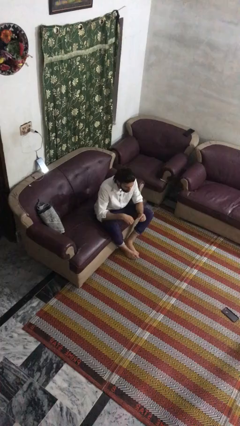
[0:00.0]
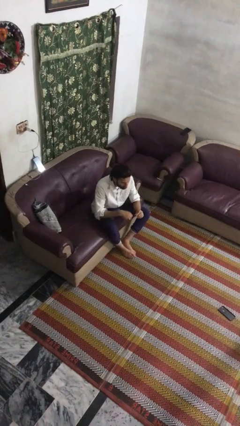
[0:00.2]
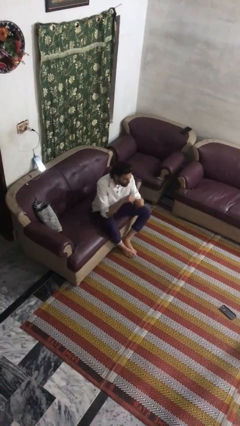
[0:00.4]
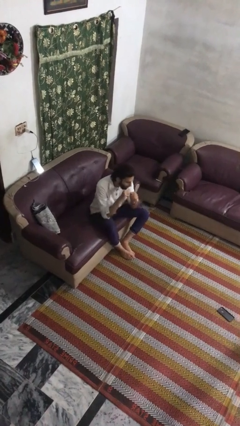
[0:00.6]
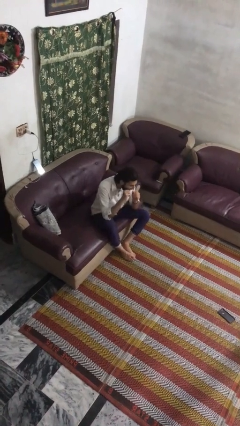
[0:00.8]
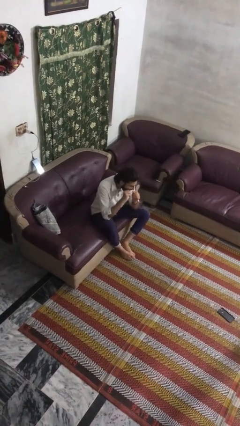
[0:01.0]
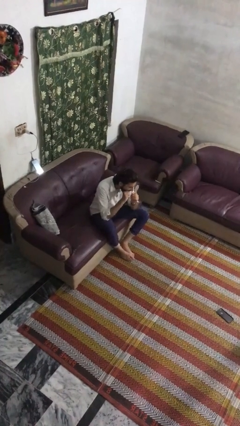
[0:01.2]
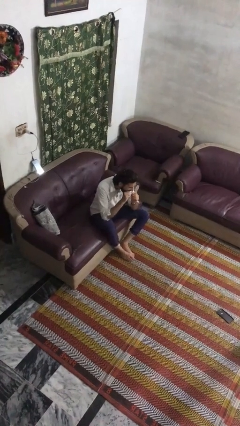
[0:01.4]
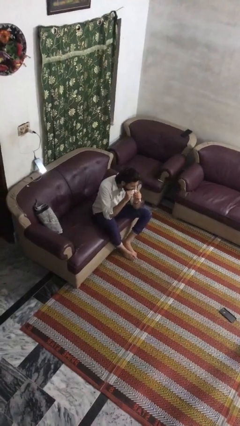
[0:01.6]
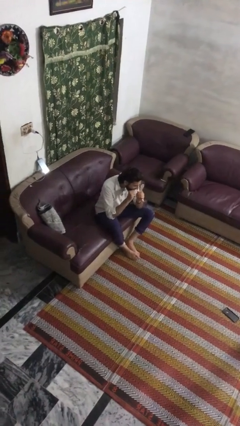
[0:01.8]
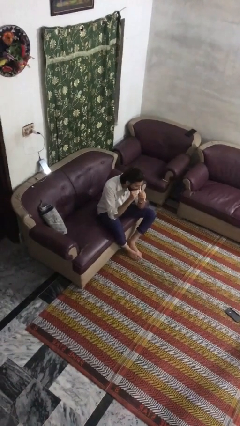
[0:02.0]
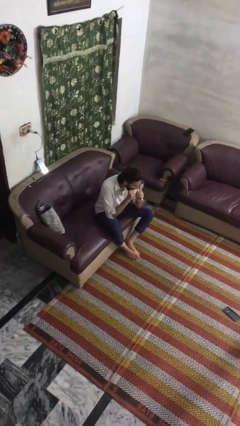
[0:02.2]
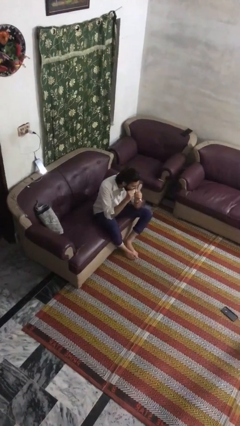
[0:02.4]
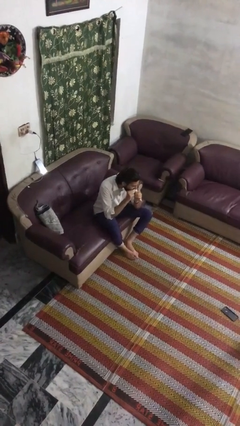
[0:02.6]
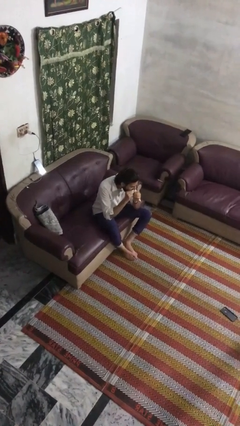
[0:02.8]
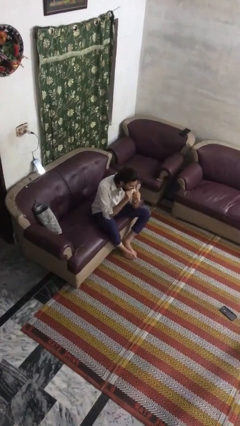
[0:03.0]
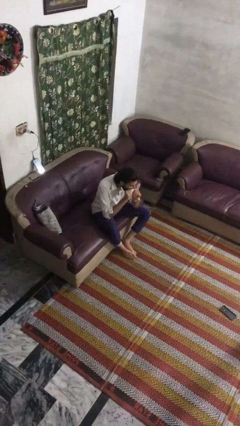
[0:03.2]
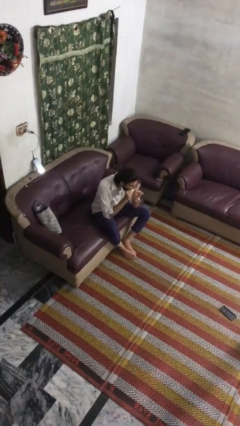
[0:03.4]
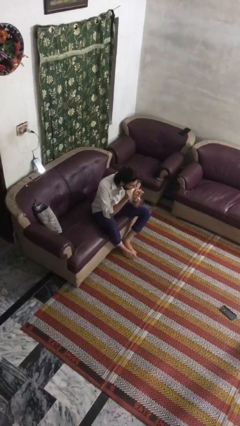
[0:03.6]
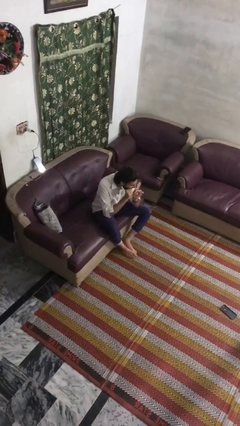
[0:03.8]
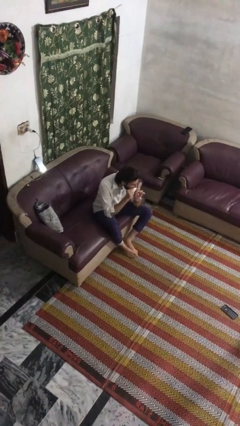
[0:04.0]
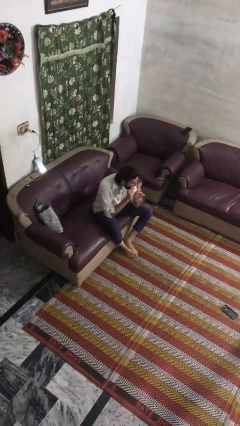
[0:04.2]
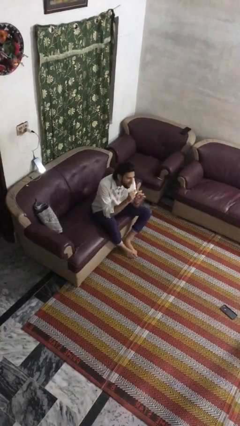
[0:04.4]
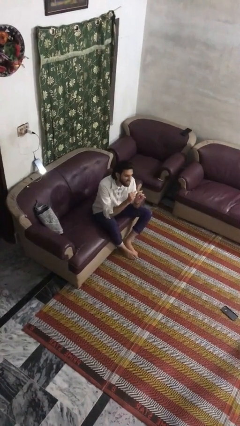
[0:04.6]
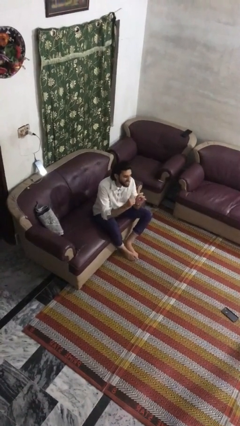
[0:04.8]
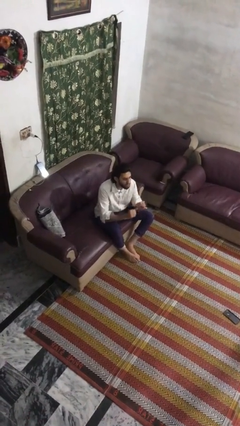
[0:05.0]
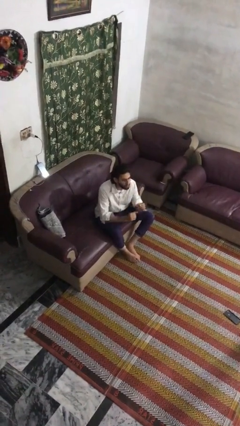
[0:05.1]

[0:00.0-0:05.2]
person flosses

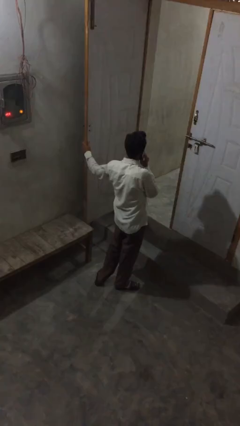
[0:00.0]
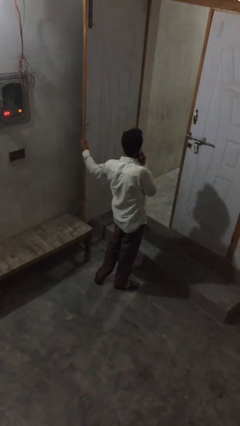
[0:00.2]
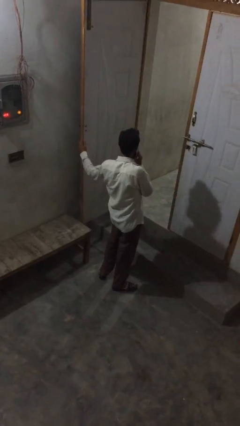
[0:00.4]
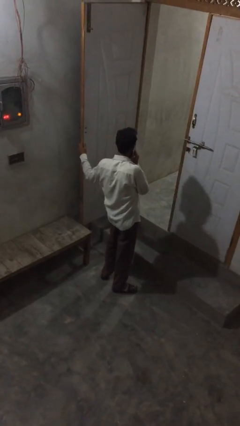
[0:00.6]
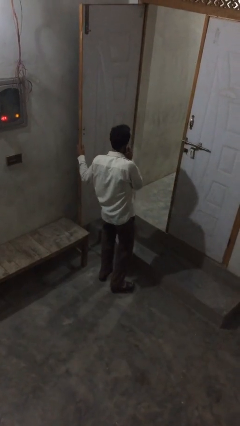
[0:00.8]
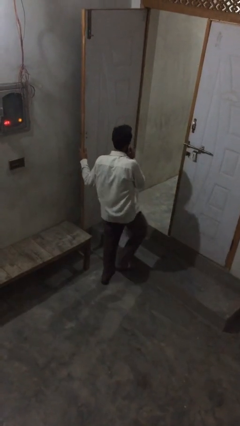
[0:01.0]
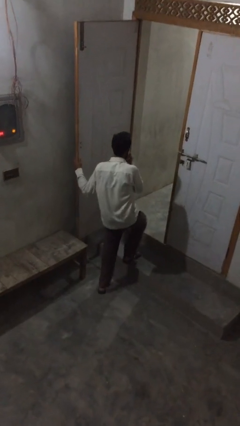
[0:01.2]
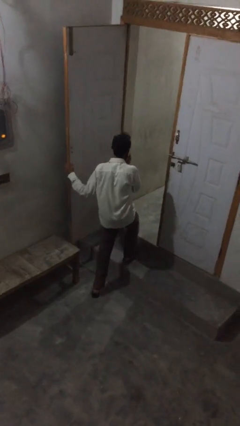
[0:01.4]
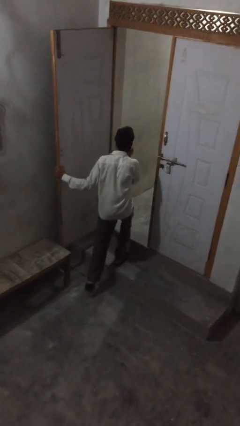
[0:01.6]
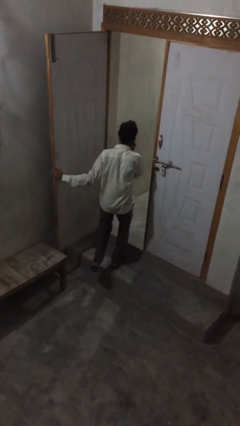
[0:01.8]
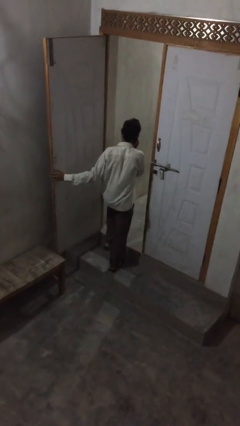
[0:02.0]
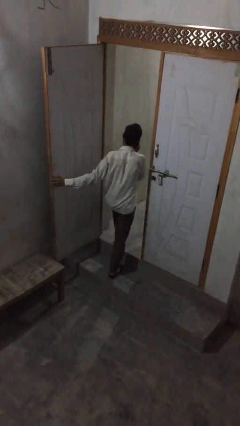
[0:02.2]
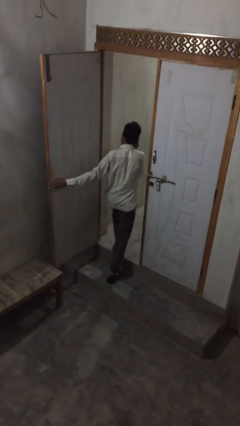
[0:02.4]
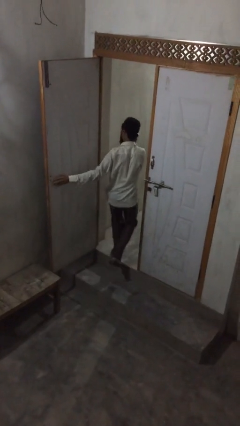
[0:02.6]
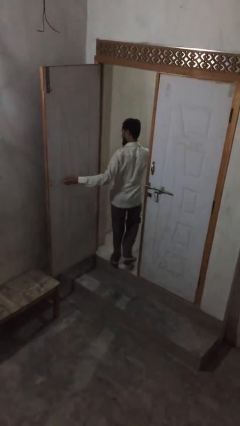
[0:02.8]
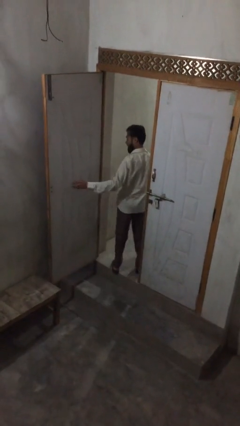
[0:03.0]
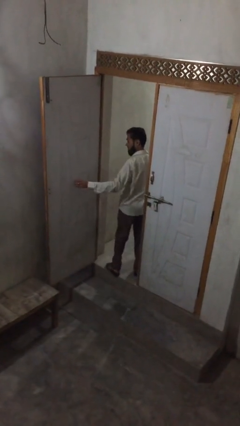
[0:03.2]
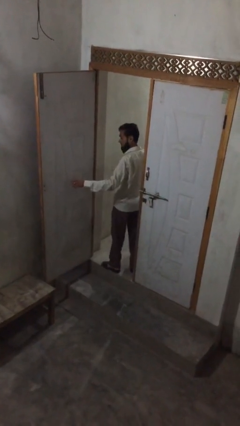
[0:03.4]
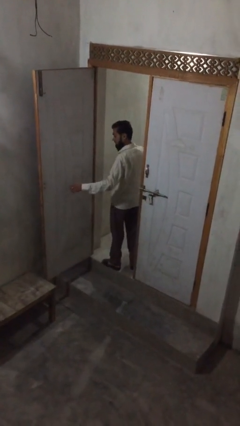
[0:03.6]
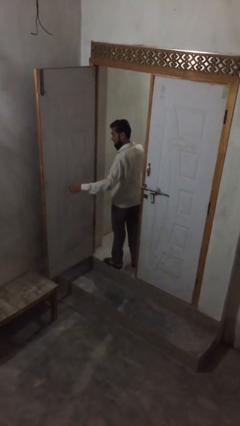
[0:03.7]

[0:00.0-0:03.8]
person exits scene through structure

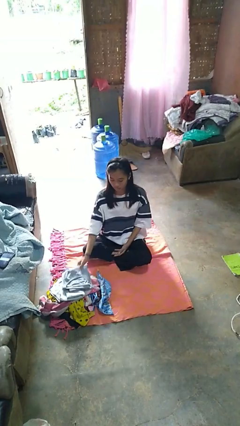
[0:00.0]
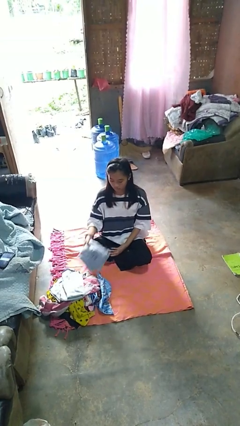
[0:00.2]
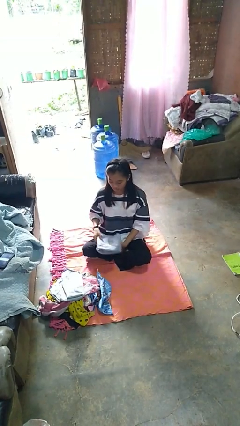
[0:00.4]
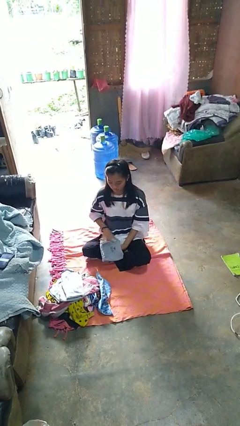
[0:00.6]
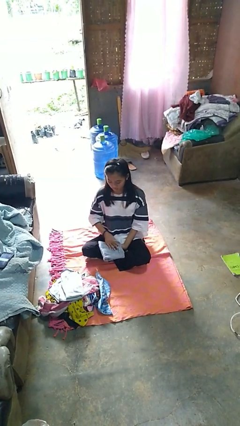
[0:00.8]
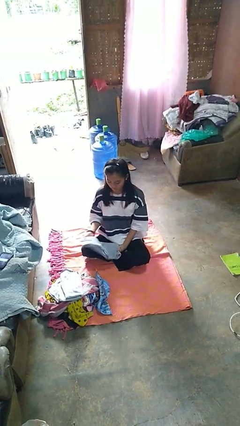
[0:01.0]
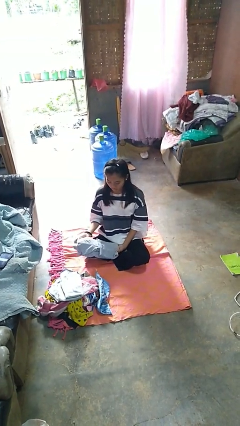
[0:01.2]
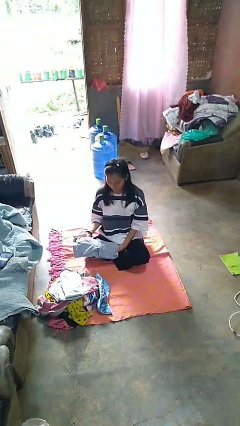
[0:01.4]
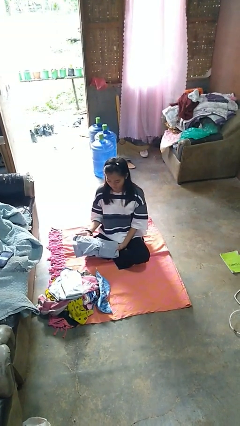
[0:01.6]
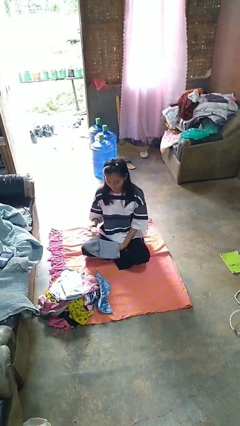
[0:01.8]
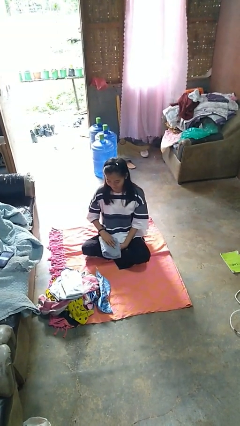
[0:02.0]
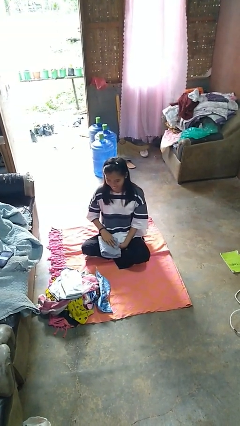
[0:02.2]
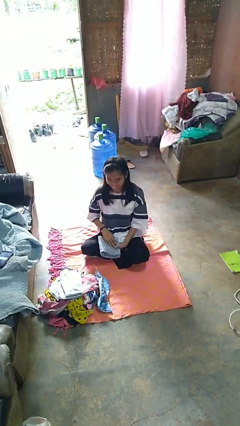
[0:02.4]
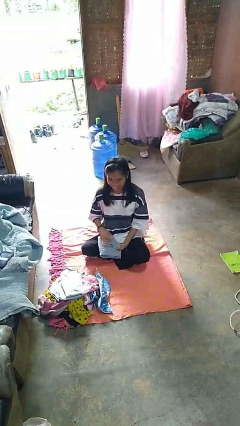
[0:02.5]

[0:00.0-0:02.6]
person folds shirt

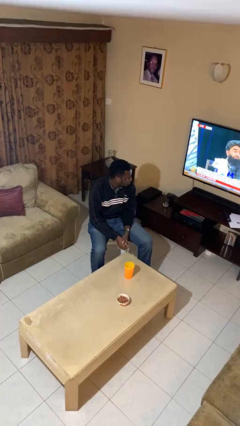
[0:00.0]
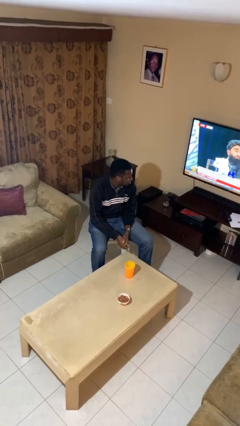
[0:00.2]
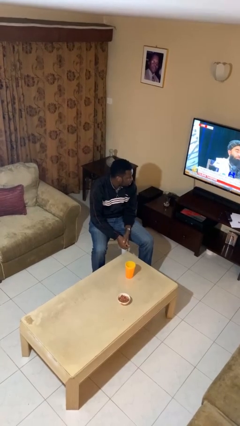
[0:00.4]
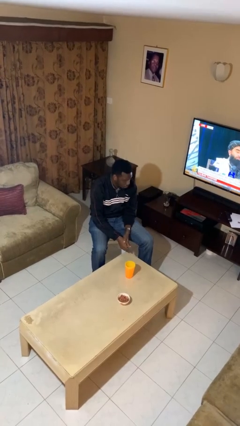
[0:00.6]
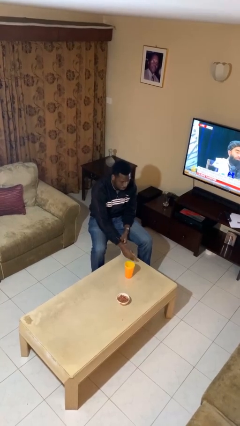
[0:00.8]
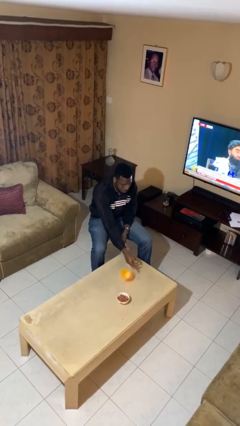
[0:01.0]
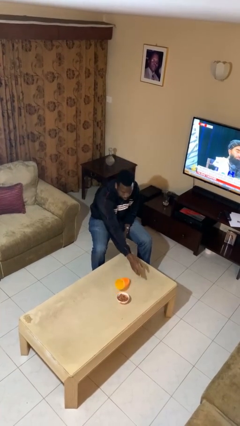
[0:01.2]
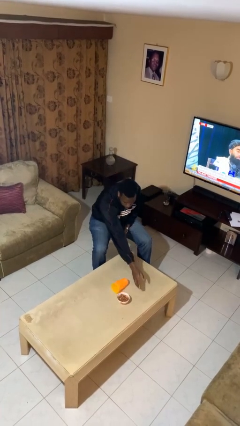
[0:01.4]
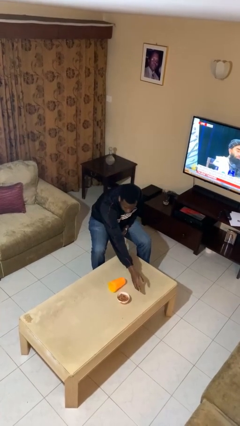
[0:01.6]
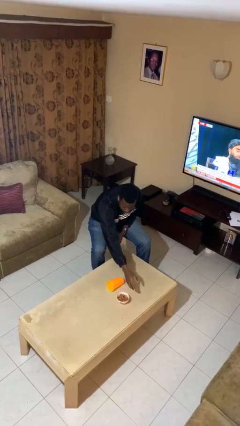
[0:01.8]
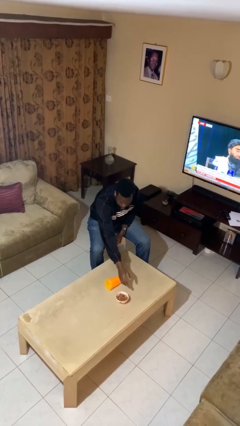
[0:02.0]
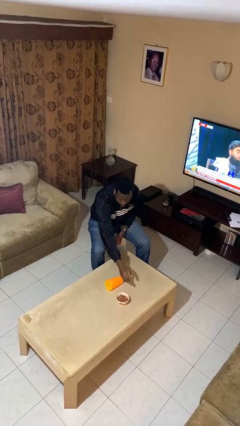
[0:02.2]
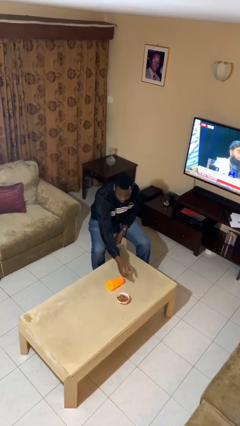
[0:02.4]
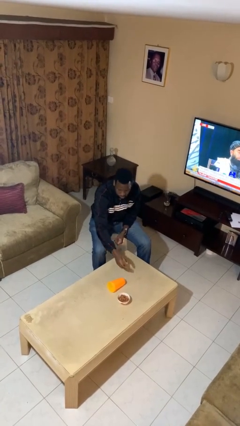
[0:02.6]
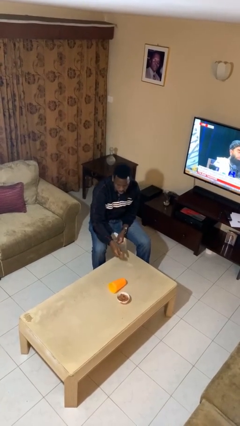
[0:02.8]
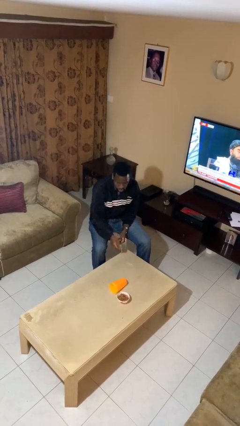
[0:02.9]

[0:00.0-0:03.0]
person knocks over glass

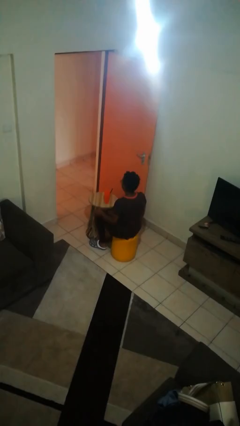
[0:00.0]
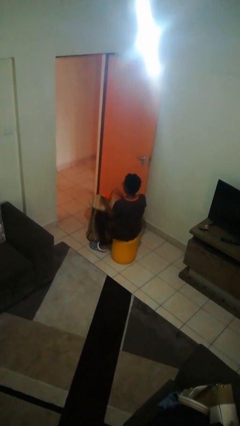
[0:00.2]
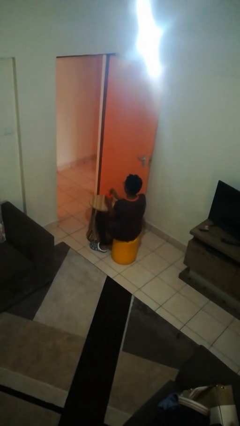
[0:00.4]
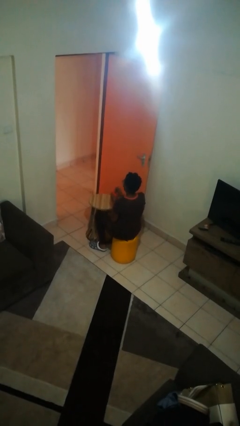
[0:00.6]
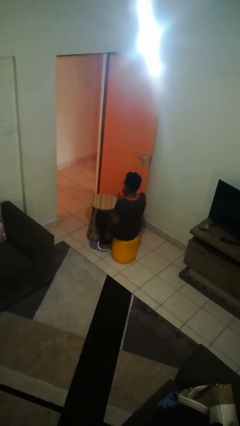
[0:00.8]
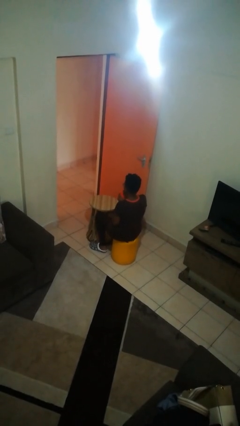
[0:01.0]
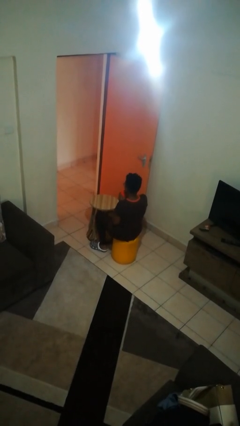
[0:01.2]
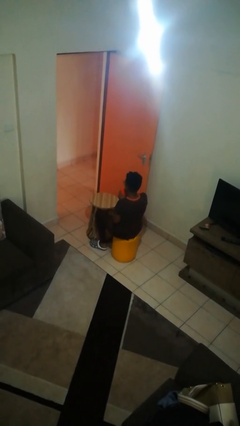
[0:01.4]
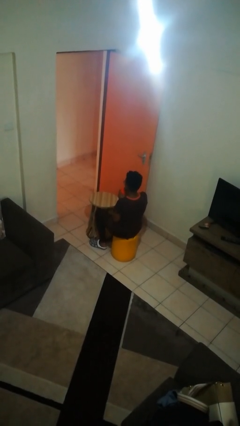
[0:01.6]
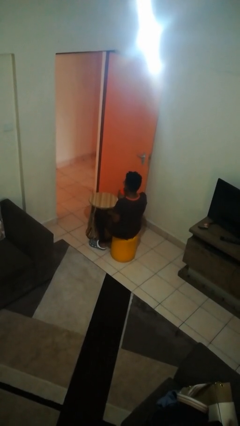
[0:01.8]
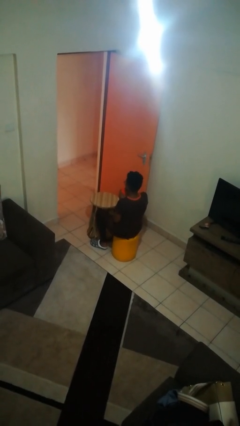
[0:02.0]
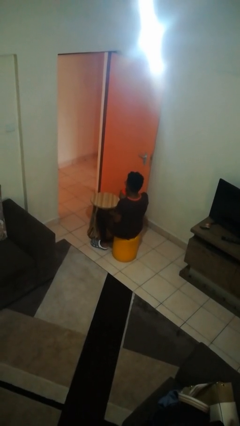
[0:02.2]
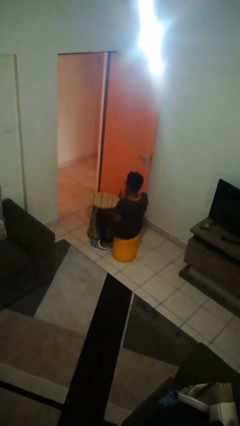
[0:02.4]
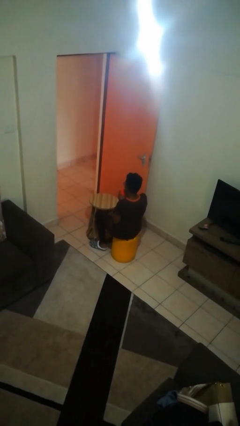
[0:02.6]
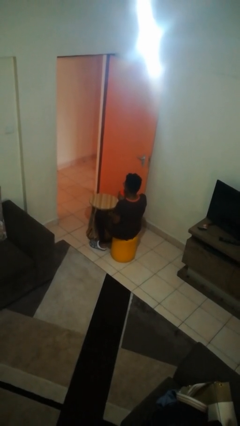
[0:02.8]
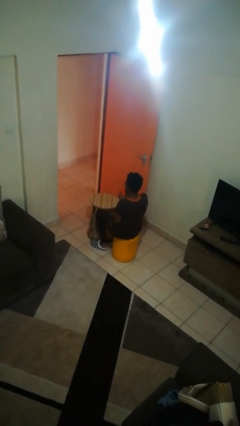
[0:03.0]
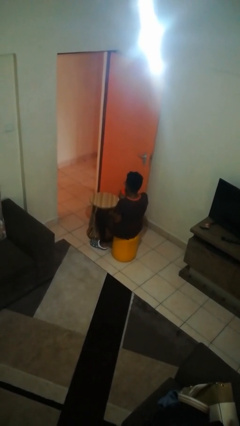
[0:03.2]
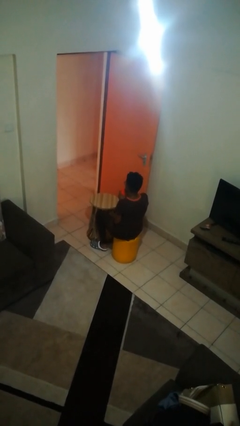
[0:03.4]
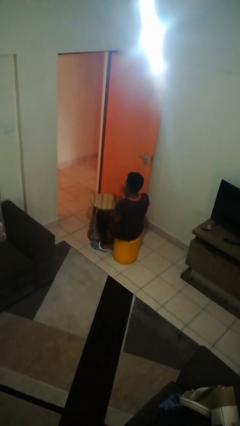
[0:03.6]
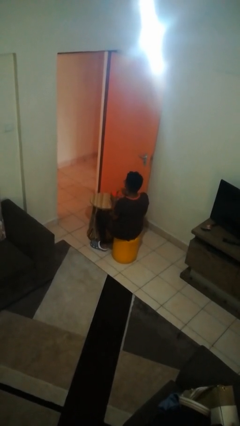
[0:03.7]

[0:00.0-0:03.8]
person drinks from straw
